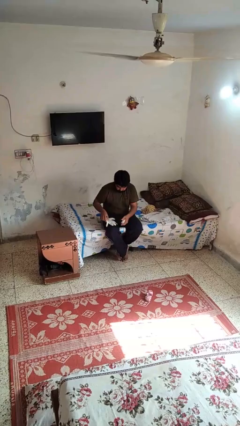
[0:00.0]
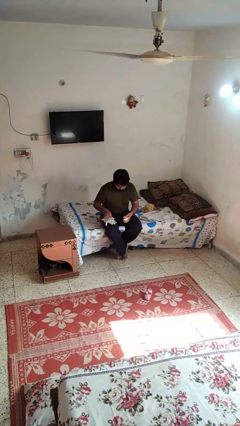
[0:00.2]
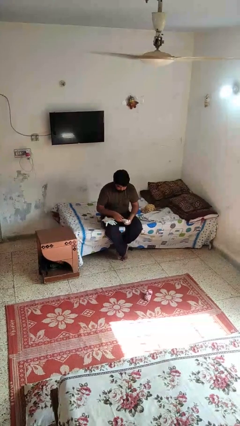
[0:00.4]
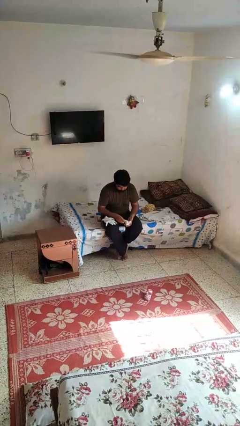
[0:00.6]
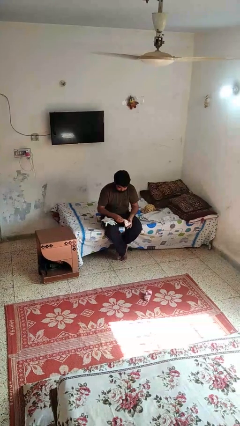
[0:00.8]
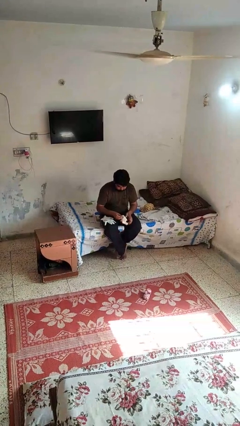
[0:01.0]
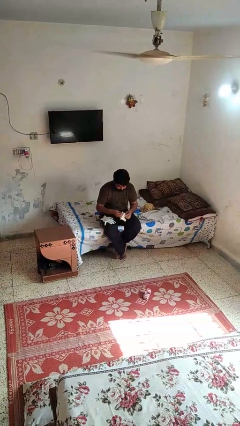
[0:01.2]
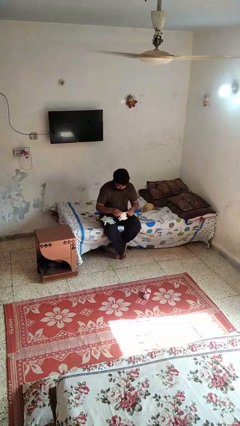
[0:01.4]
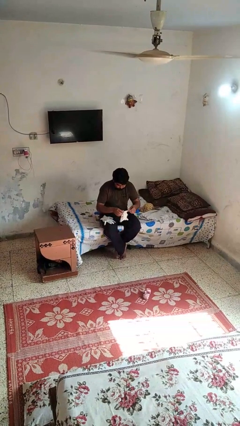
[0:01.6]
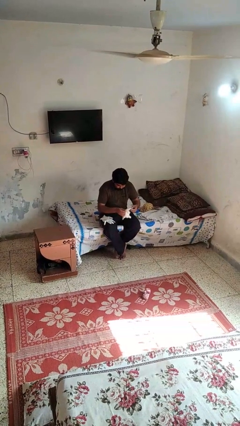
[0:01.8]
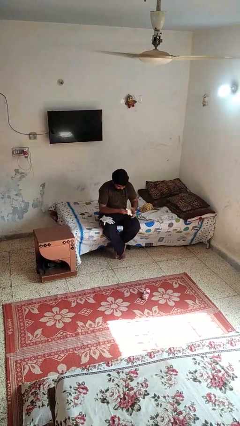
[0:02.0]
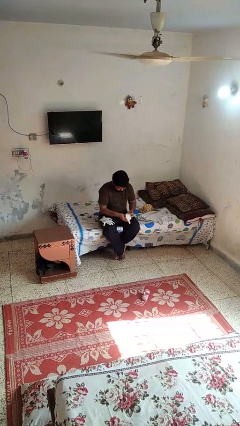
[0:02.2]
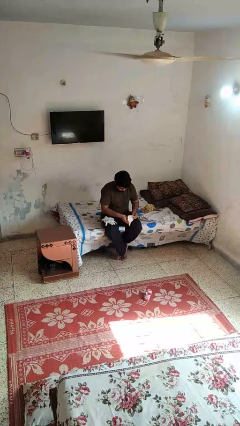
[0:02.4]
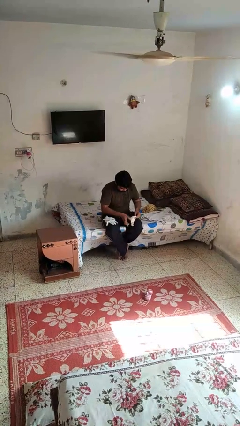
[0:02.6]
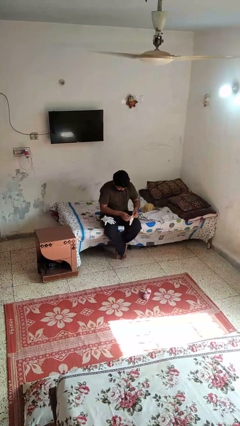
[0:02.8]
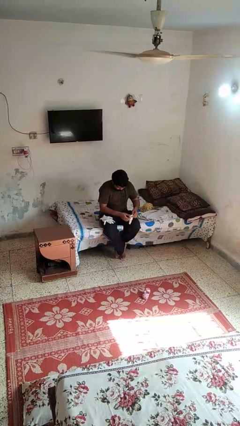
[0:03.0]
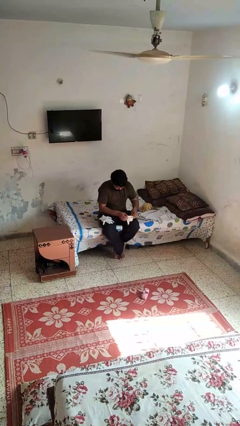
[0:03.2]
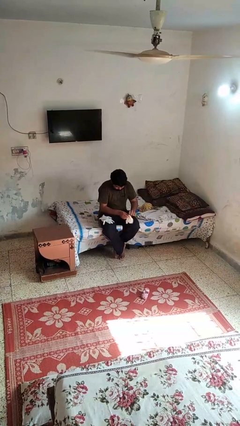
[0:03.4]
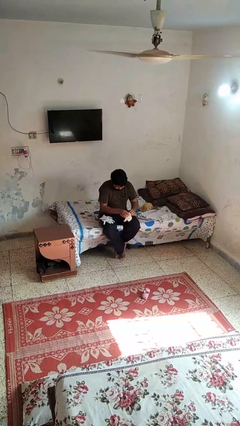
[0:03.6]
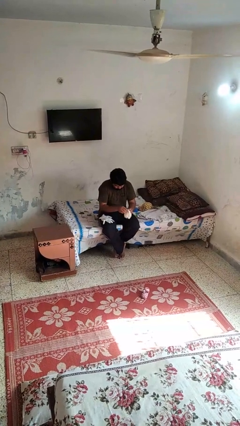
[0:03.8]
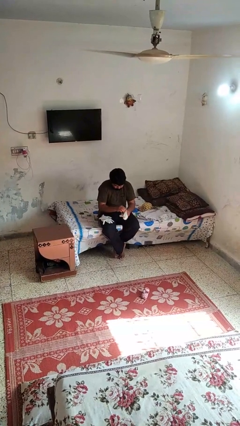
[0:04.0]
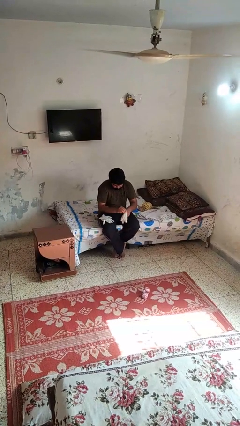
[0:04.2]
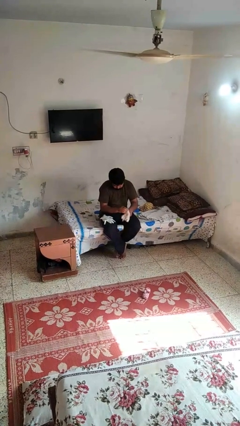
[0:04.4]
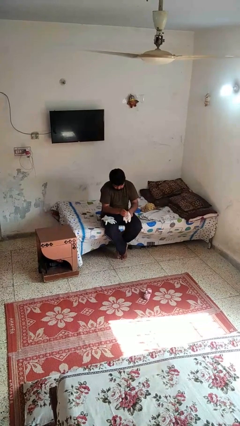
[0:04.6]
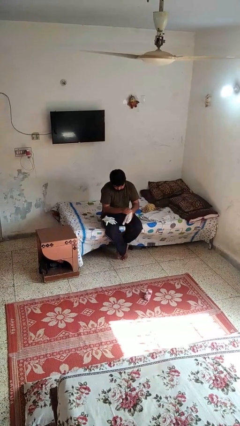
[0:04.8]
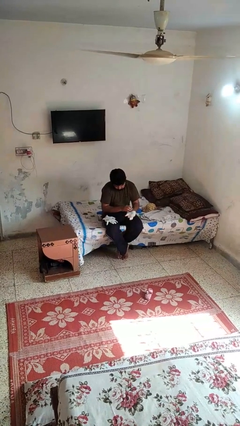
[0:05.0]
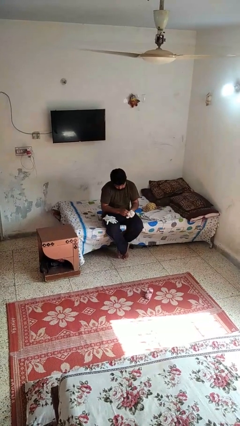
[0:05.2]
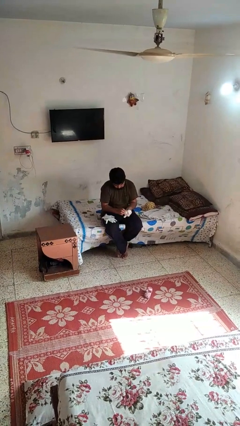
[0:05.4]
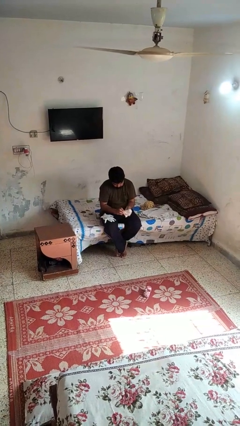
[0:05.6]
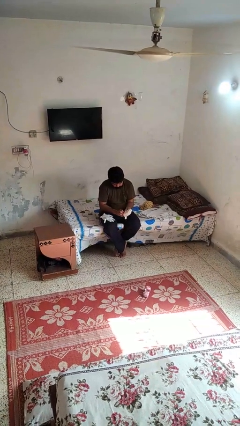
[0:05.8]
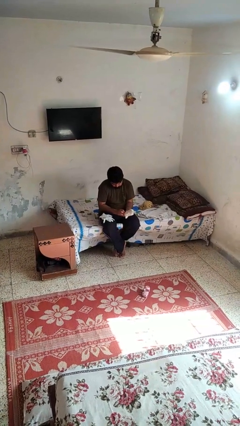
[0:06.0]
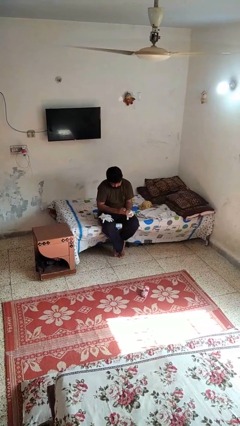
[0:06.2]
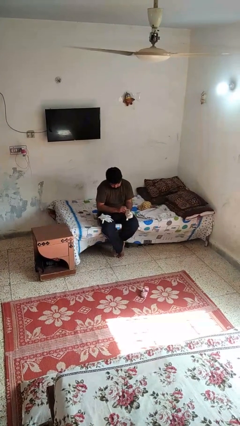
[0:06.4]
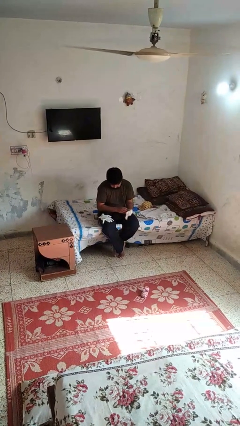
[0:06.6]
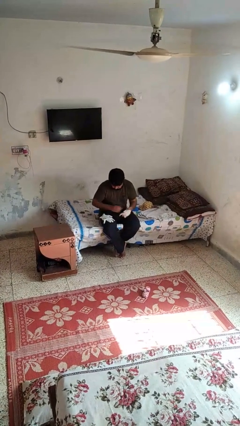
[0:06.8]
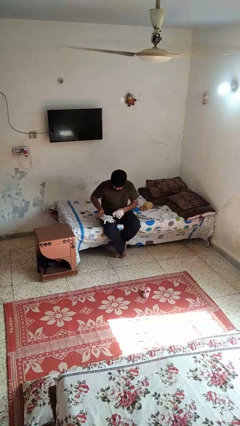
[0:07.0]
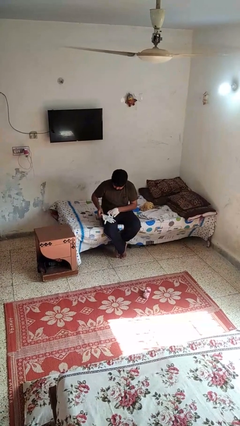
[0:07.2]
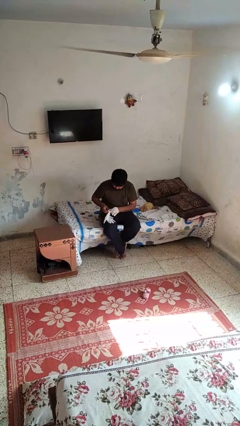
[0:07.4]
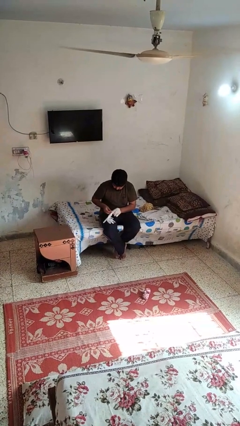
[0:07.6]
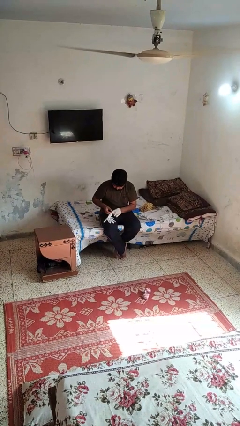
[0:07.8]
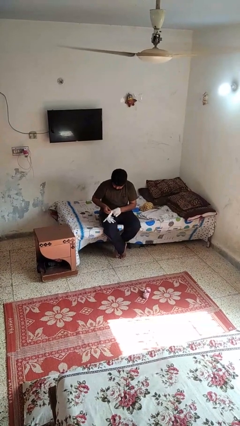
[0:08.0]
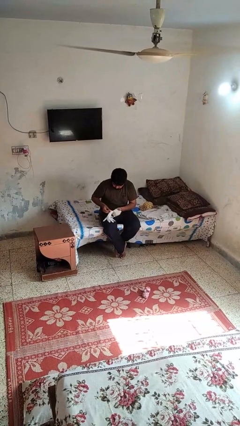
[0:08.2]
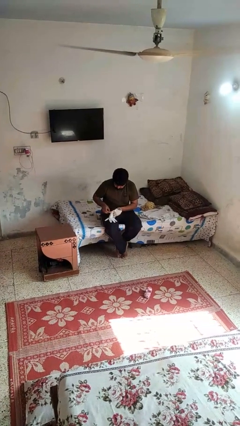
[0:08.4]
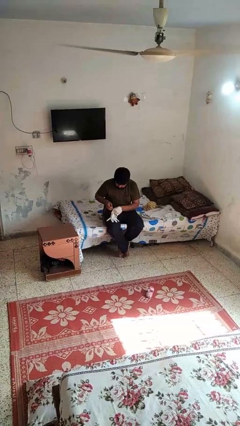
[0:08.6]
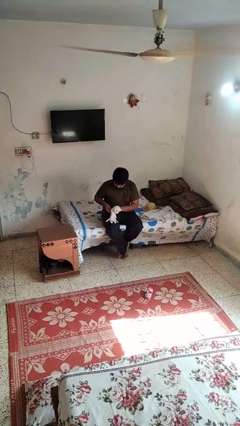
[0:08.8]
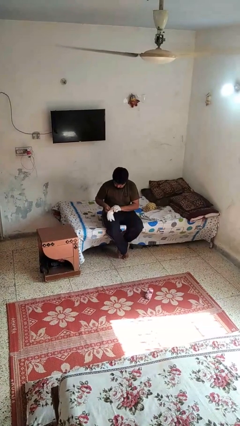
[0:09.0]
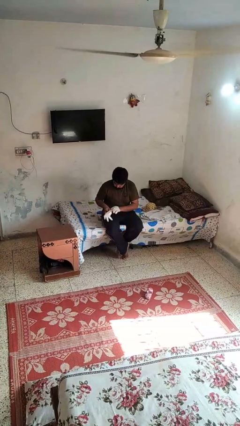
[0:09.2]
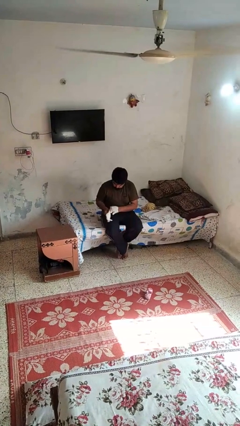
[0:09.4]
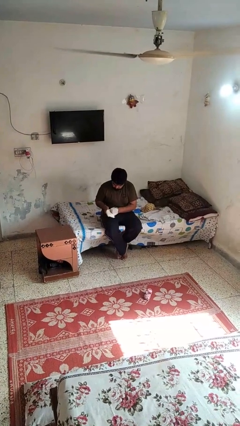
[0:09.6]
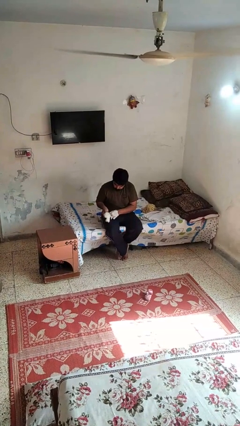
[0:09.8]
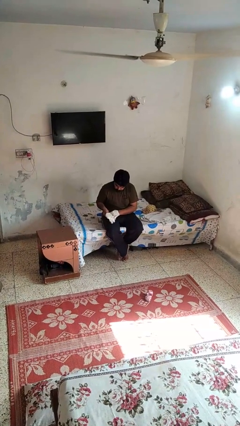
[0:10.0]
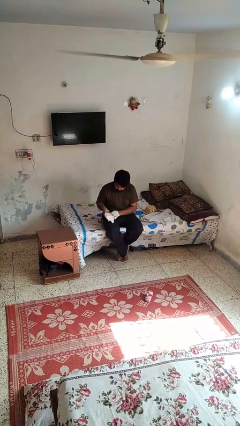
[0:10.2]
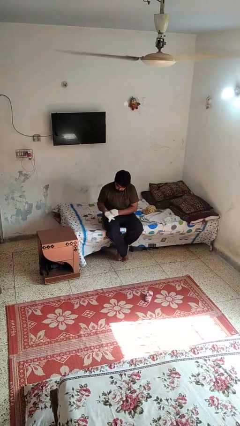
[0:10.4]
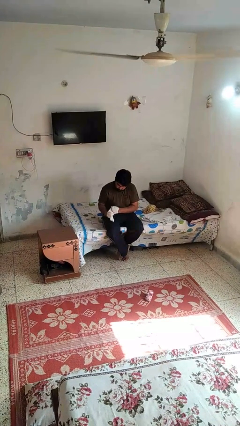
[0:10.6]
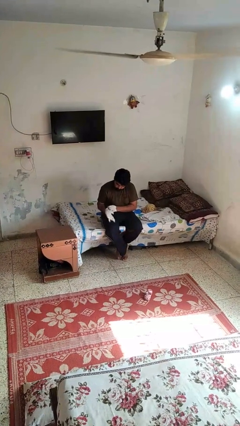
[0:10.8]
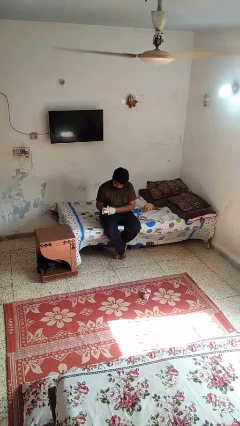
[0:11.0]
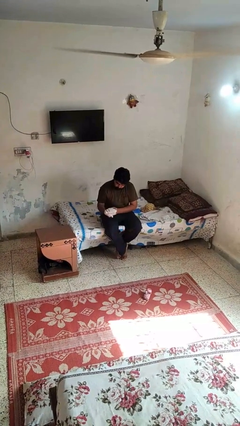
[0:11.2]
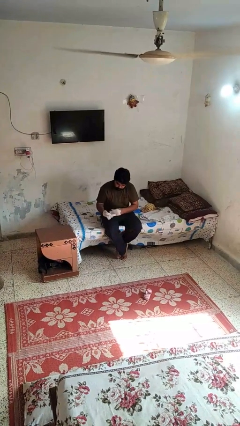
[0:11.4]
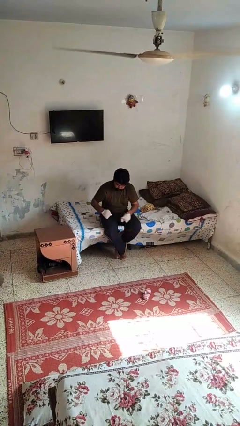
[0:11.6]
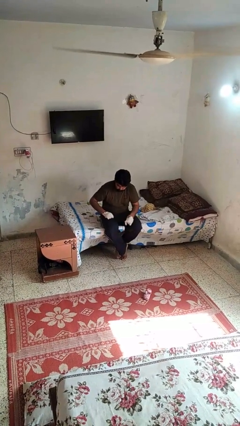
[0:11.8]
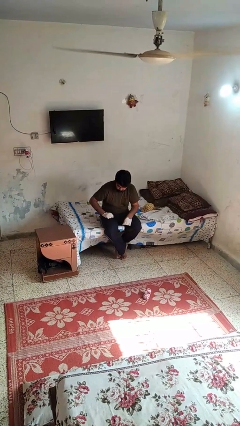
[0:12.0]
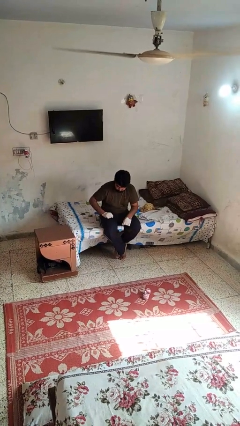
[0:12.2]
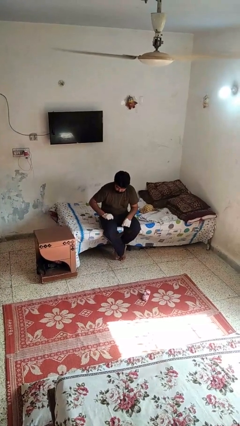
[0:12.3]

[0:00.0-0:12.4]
person puts on gloves

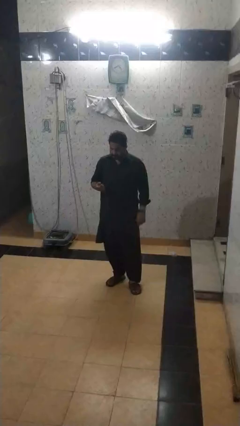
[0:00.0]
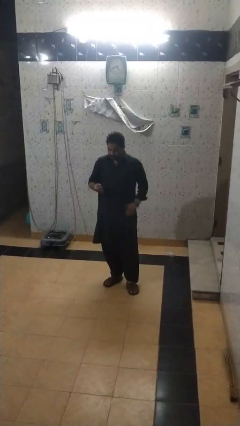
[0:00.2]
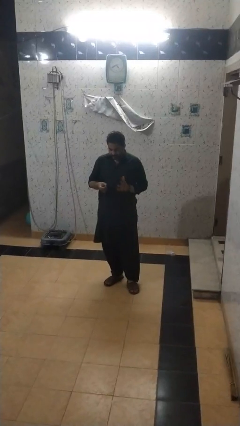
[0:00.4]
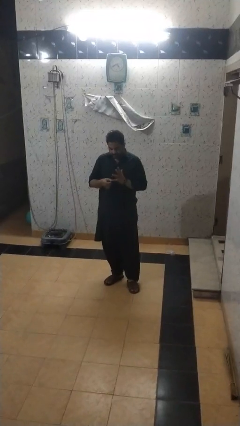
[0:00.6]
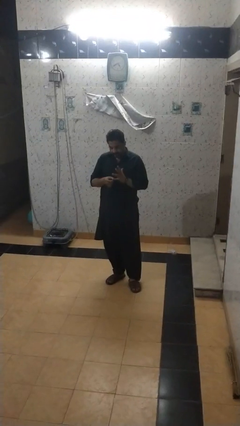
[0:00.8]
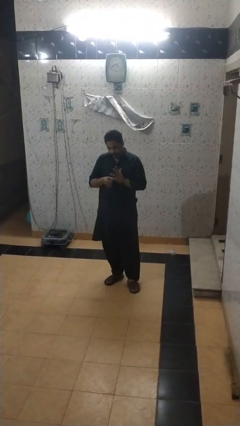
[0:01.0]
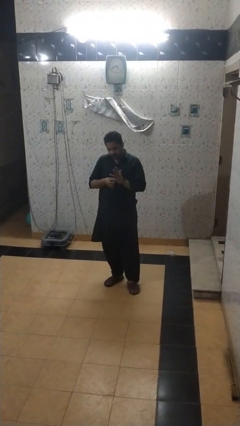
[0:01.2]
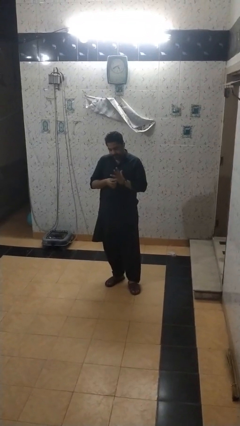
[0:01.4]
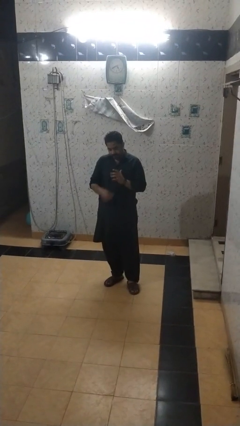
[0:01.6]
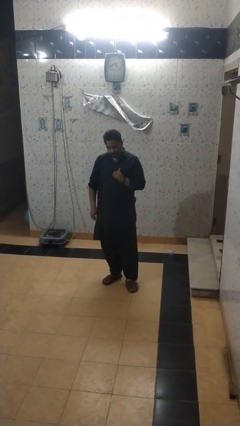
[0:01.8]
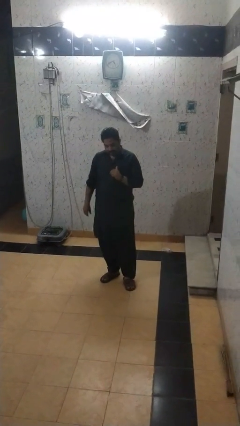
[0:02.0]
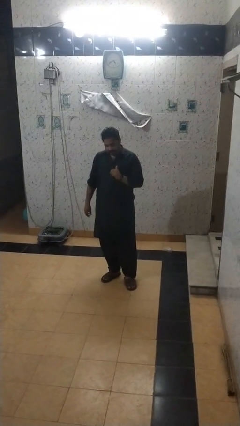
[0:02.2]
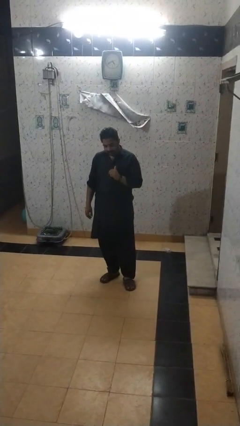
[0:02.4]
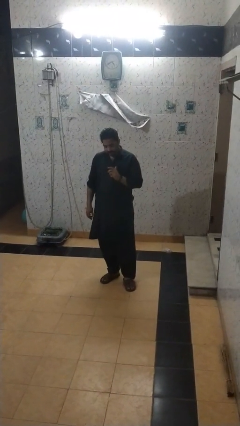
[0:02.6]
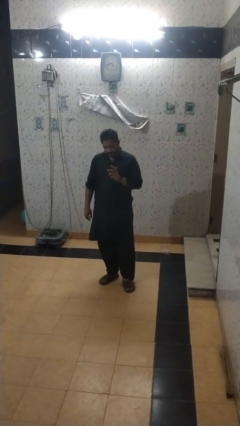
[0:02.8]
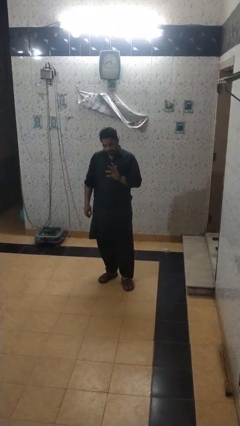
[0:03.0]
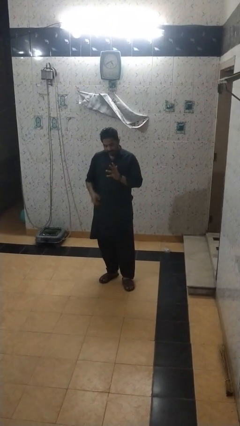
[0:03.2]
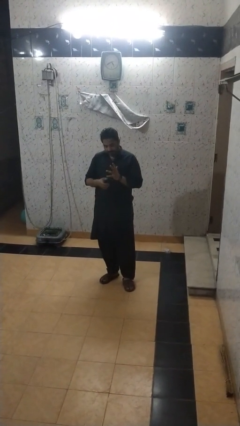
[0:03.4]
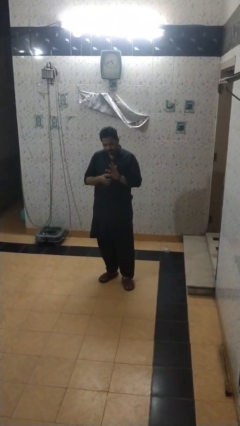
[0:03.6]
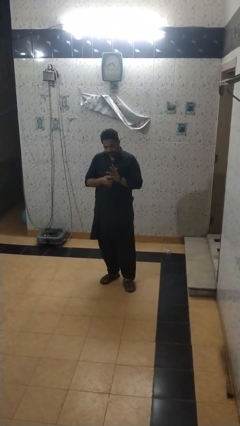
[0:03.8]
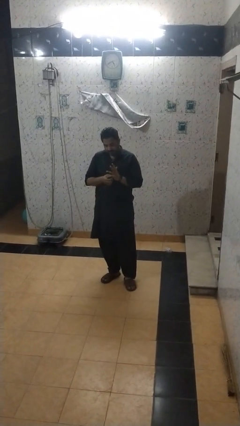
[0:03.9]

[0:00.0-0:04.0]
person puts on ring

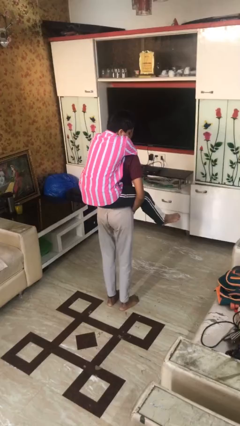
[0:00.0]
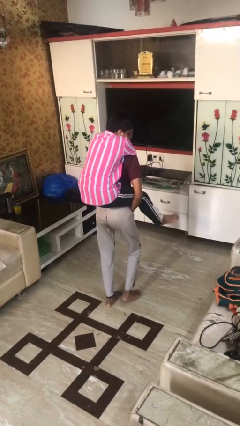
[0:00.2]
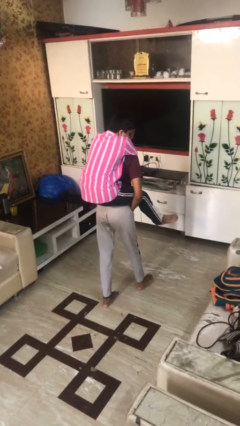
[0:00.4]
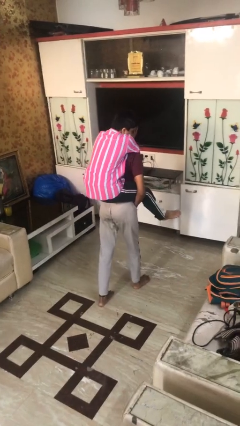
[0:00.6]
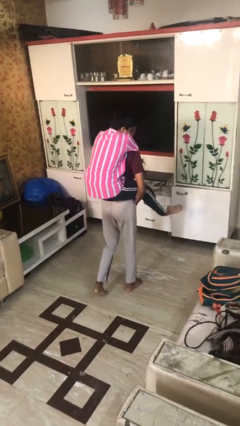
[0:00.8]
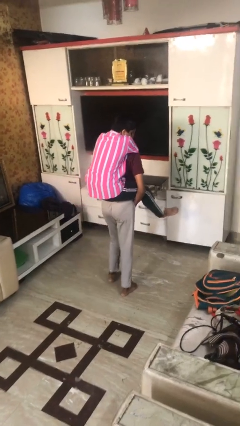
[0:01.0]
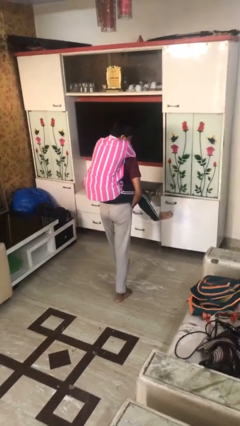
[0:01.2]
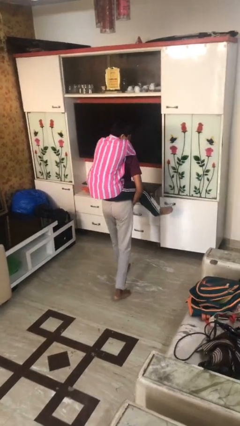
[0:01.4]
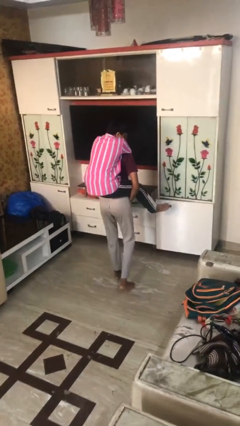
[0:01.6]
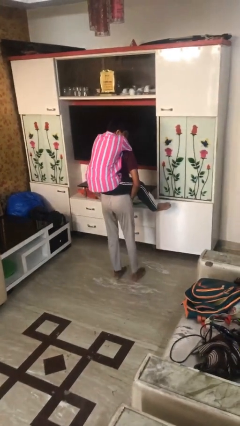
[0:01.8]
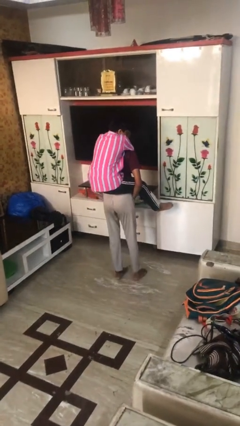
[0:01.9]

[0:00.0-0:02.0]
person carries person on back
